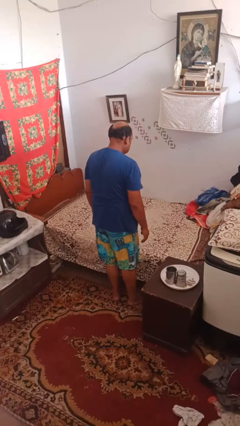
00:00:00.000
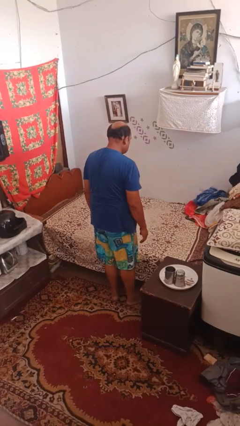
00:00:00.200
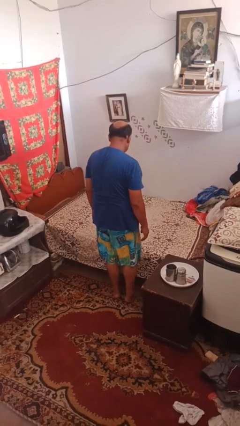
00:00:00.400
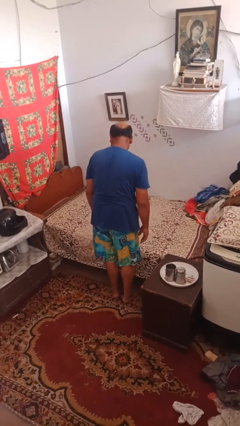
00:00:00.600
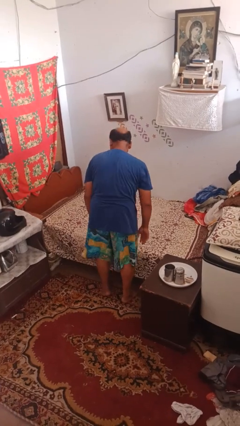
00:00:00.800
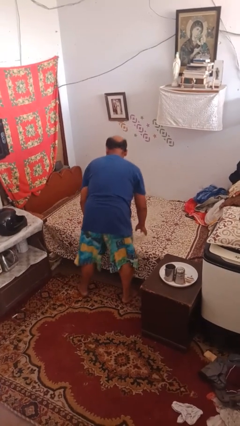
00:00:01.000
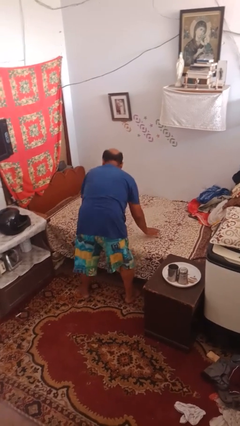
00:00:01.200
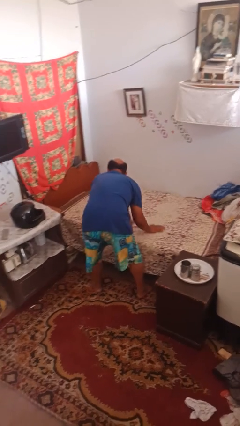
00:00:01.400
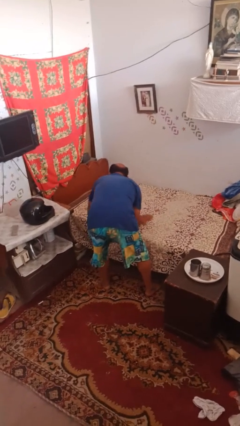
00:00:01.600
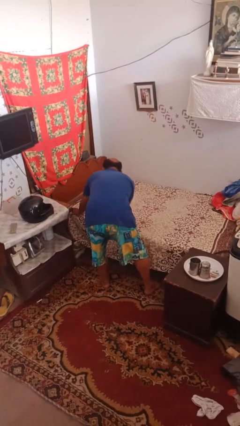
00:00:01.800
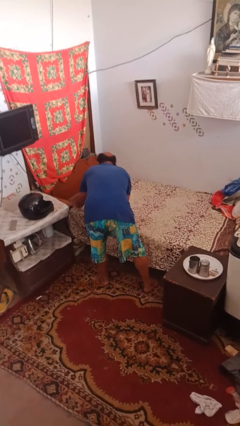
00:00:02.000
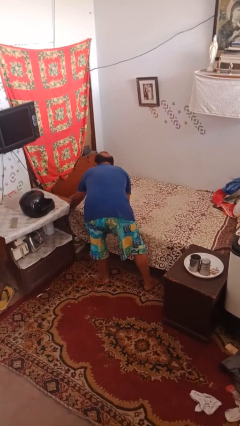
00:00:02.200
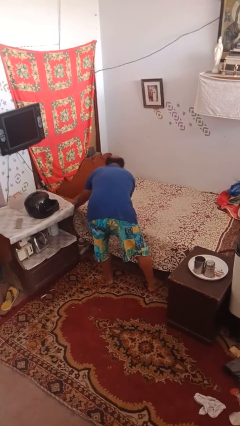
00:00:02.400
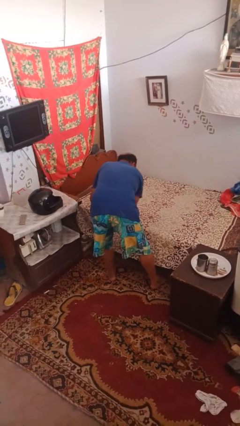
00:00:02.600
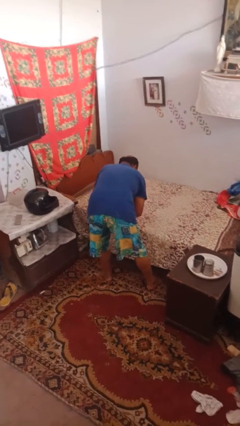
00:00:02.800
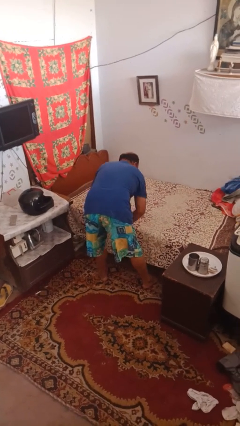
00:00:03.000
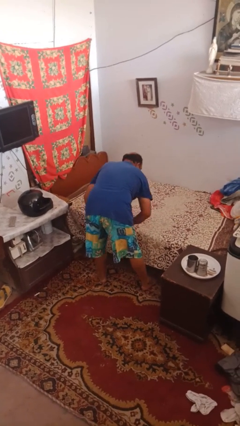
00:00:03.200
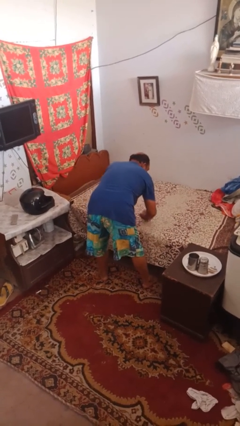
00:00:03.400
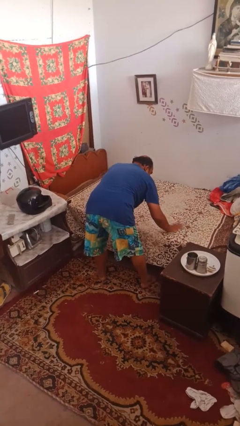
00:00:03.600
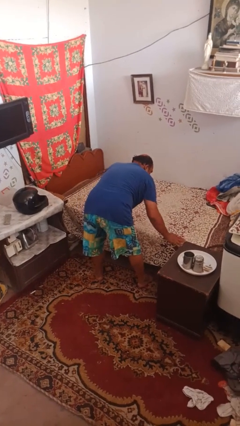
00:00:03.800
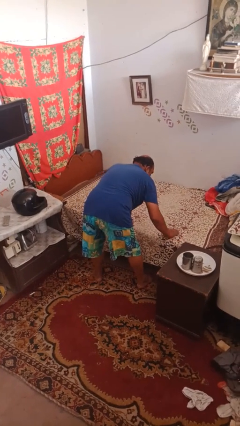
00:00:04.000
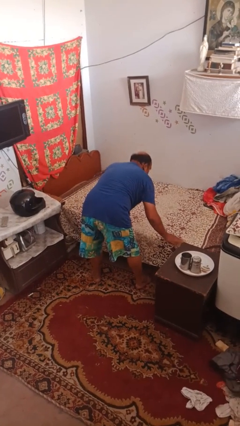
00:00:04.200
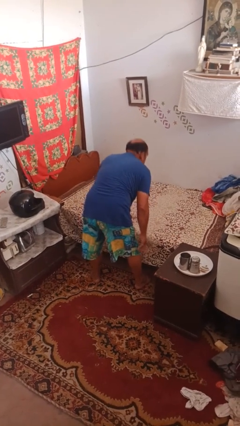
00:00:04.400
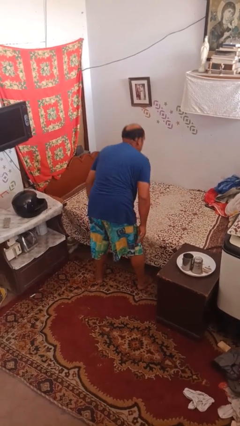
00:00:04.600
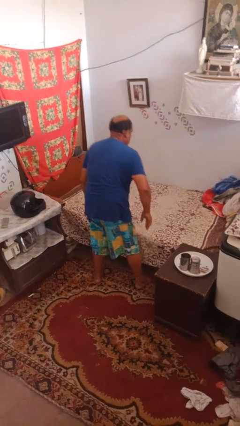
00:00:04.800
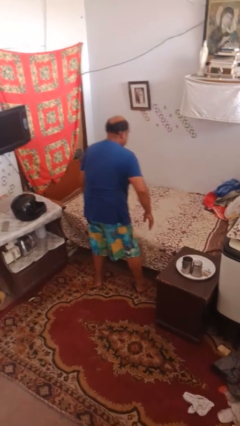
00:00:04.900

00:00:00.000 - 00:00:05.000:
person makes bed

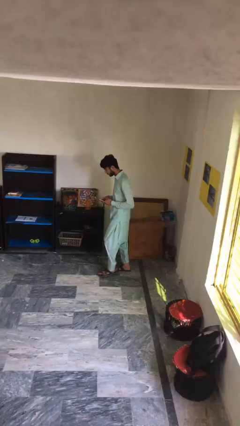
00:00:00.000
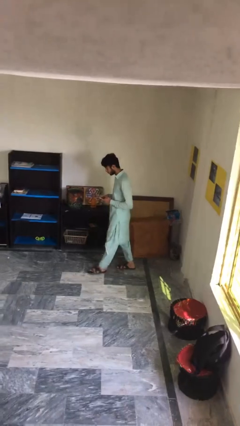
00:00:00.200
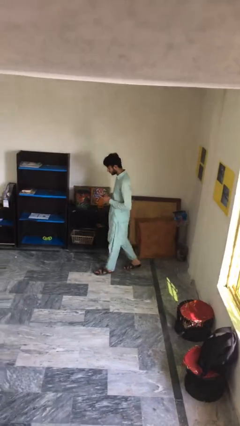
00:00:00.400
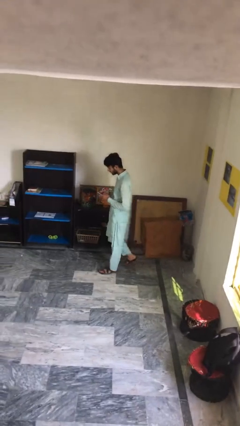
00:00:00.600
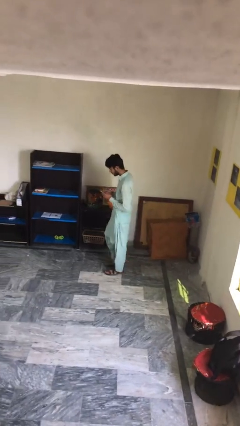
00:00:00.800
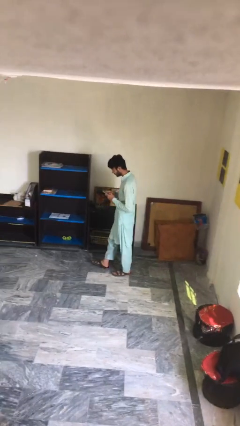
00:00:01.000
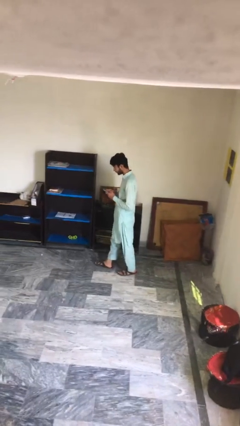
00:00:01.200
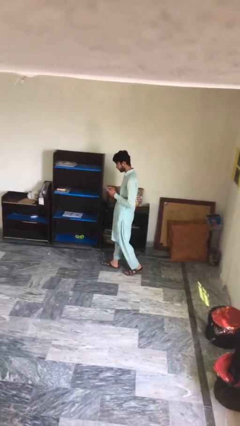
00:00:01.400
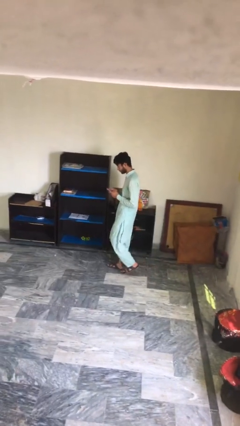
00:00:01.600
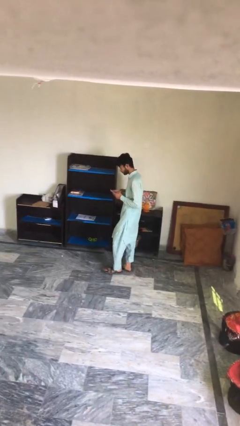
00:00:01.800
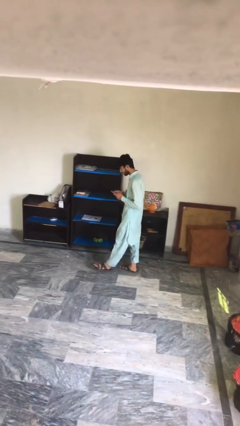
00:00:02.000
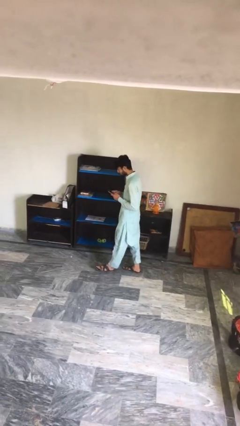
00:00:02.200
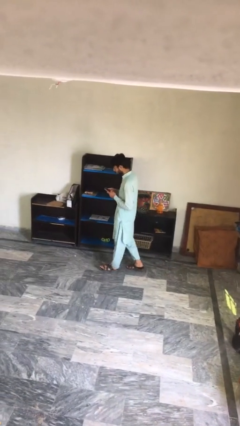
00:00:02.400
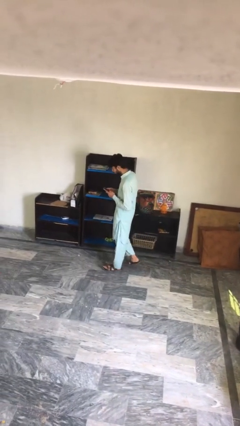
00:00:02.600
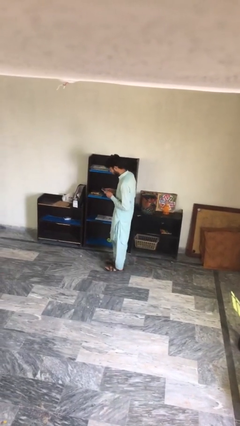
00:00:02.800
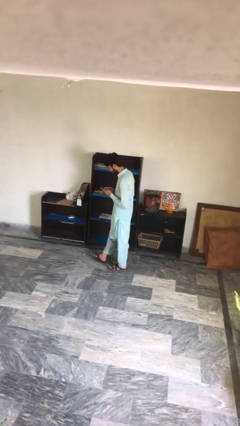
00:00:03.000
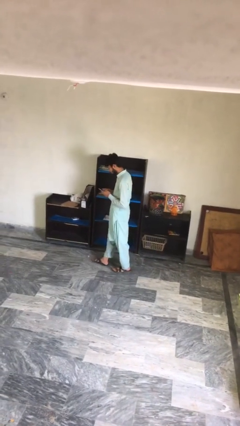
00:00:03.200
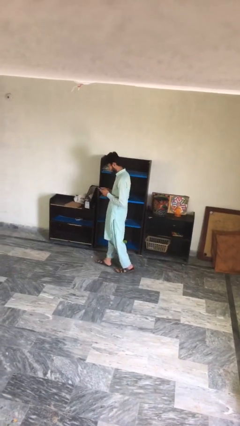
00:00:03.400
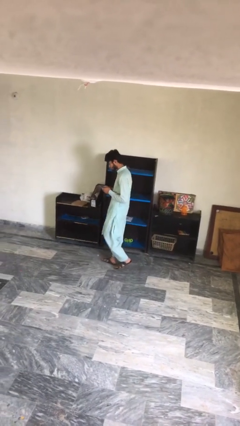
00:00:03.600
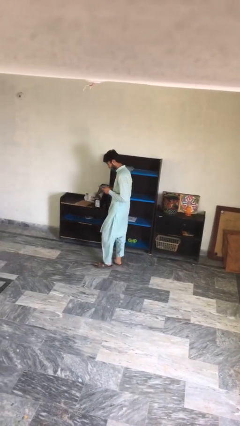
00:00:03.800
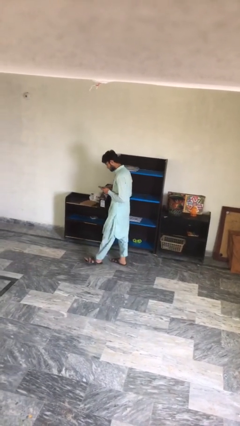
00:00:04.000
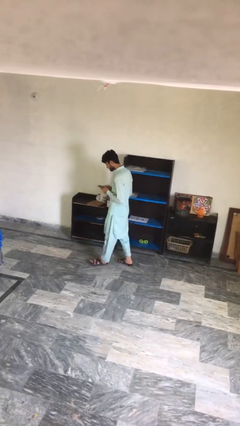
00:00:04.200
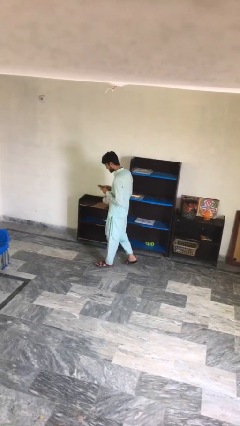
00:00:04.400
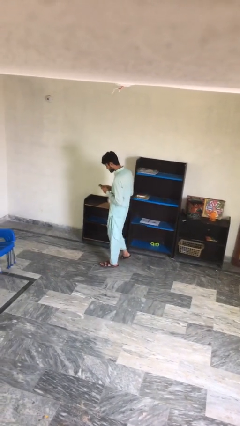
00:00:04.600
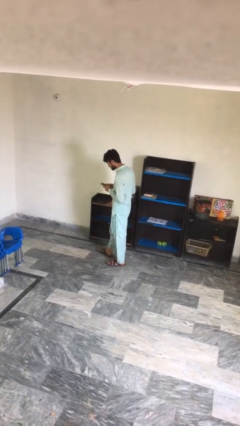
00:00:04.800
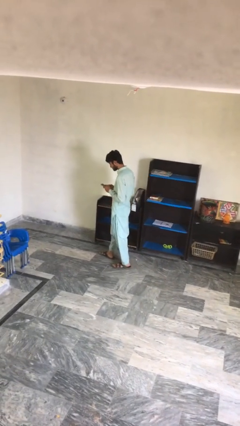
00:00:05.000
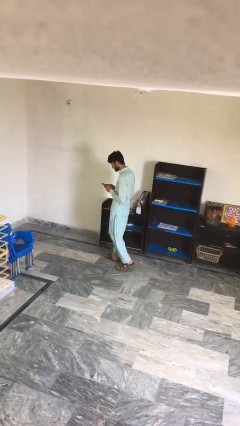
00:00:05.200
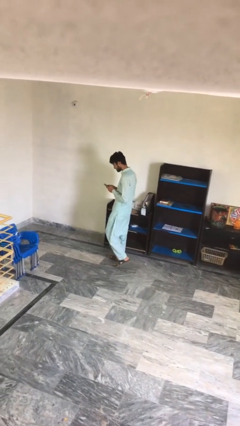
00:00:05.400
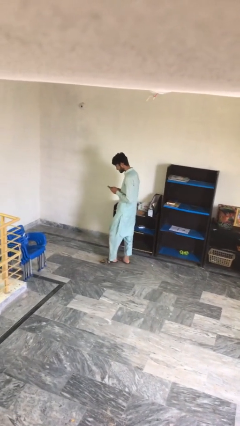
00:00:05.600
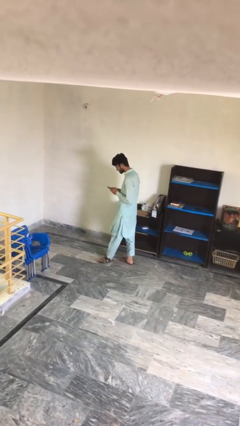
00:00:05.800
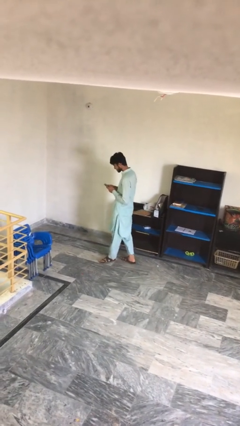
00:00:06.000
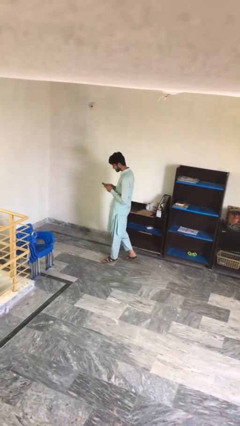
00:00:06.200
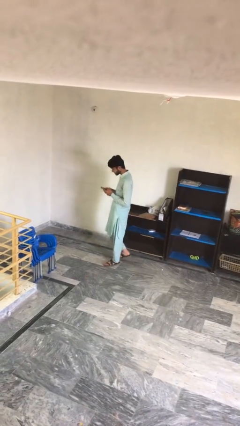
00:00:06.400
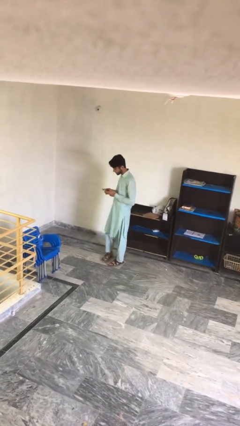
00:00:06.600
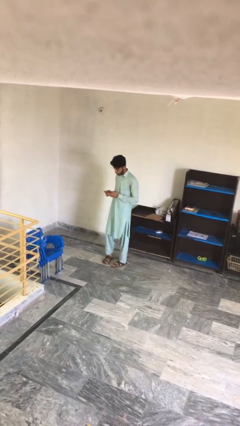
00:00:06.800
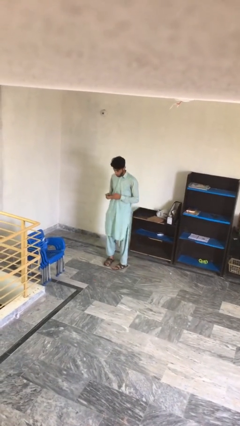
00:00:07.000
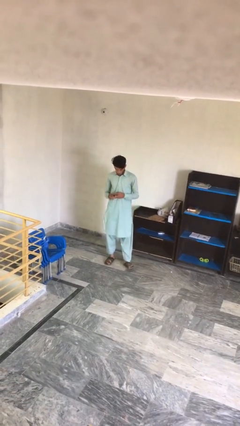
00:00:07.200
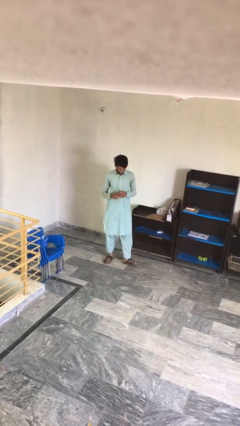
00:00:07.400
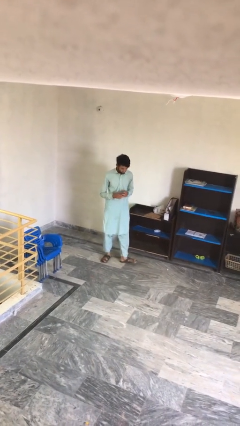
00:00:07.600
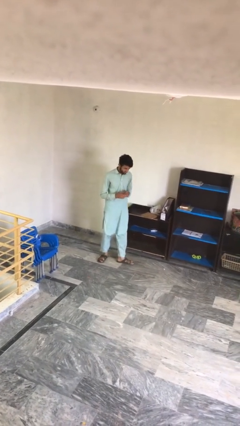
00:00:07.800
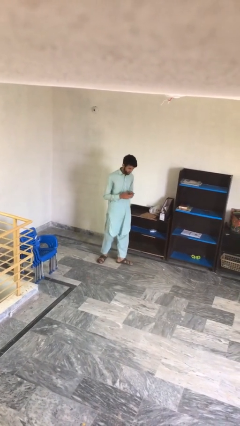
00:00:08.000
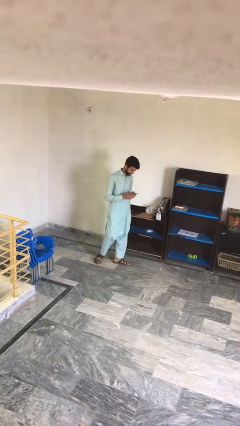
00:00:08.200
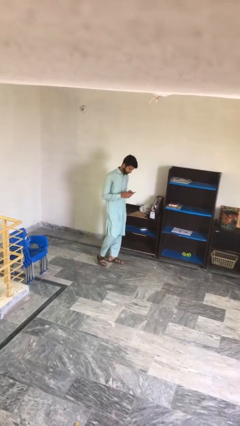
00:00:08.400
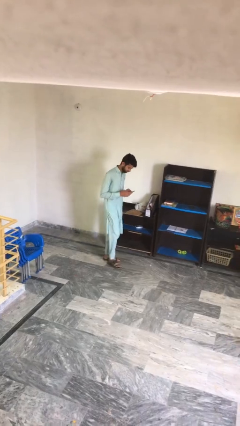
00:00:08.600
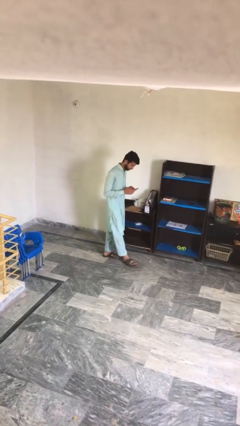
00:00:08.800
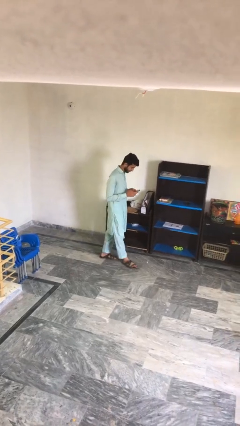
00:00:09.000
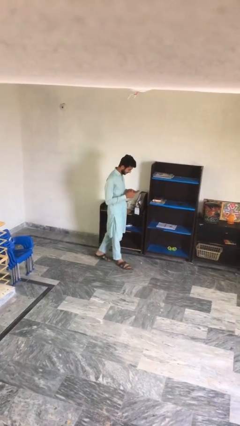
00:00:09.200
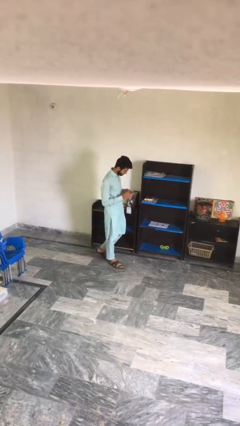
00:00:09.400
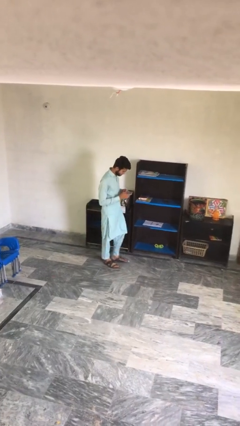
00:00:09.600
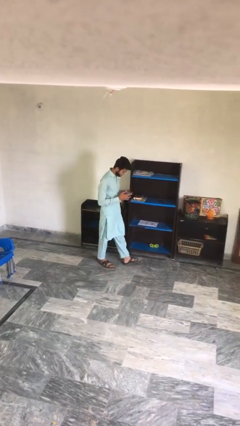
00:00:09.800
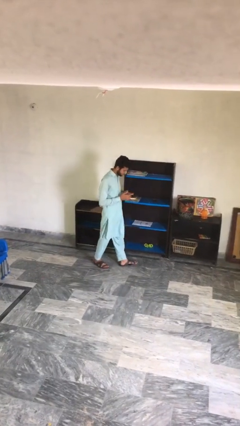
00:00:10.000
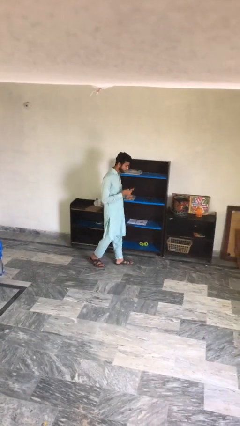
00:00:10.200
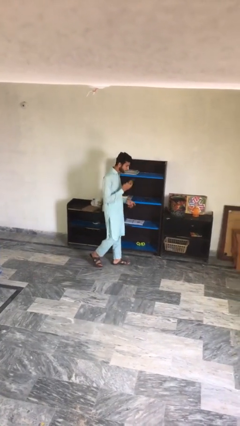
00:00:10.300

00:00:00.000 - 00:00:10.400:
person texts on phone

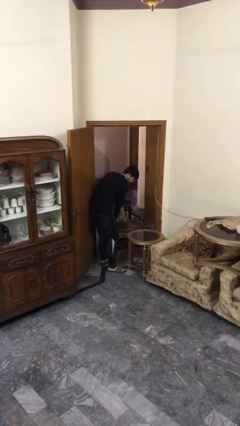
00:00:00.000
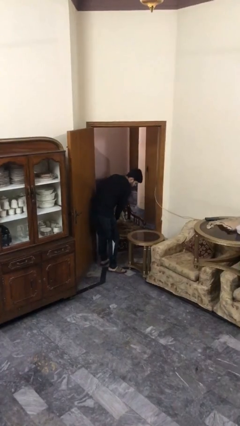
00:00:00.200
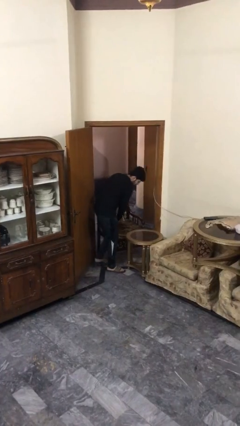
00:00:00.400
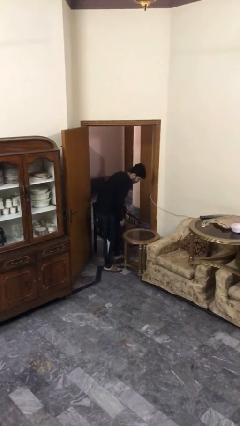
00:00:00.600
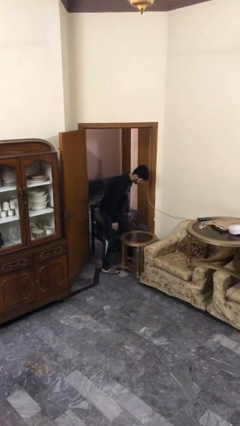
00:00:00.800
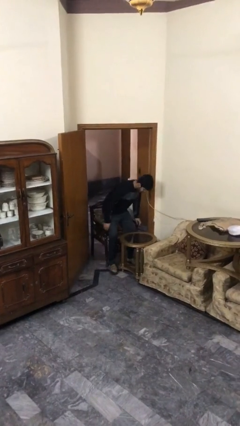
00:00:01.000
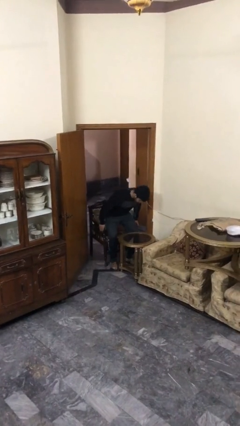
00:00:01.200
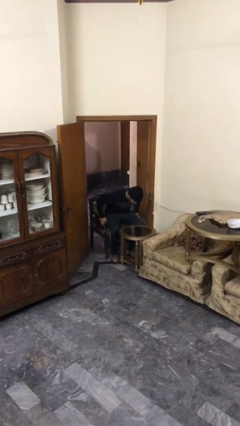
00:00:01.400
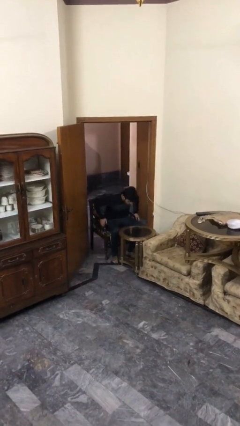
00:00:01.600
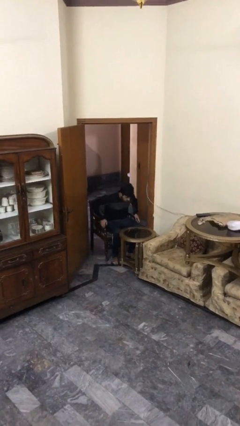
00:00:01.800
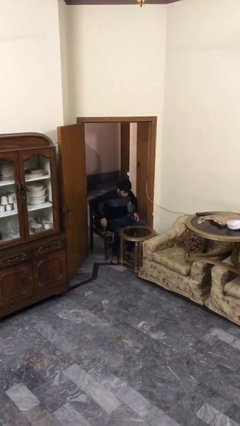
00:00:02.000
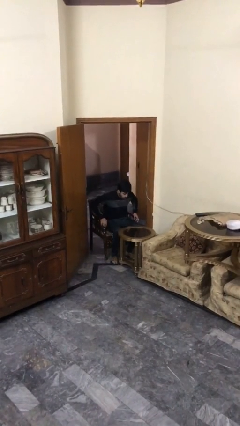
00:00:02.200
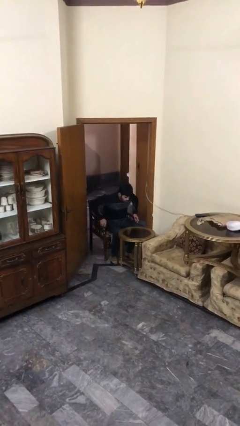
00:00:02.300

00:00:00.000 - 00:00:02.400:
person sits down

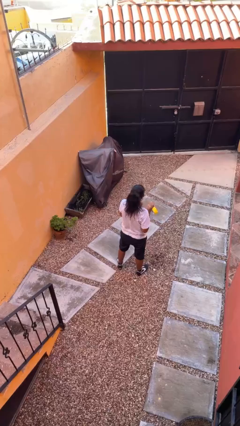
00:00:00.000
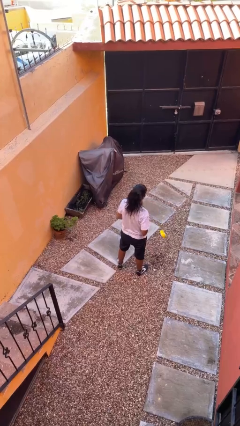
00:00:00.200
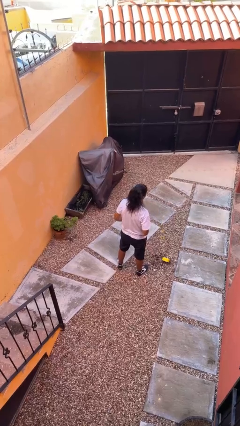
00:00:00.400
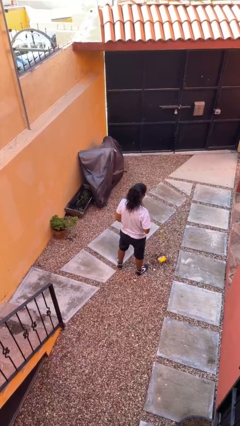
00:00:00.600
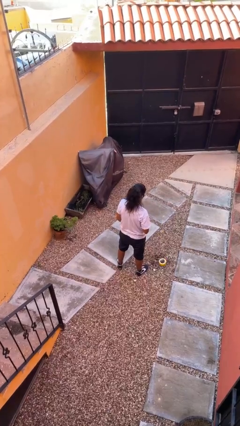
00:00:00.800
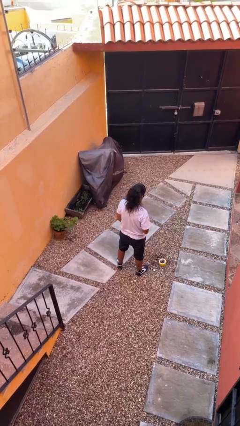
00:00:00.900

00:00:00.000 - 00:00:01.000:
person drops object
